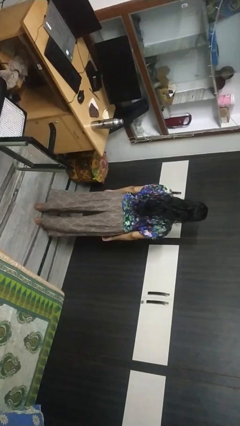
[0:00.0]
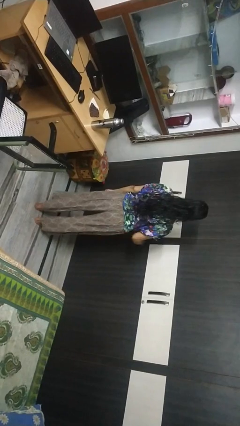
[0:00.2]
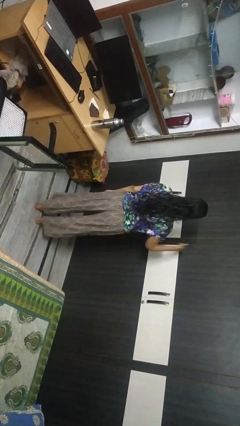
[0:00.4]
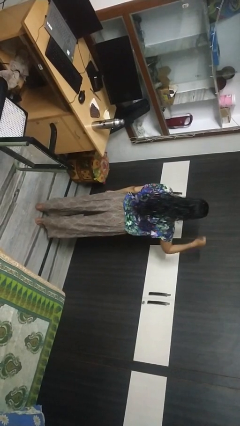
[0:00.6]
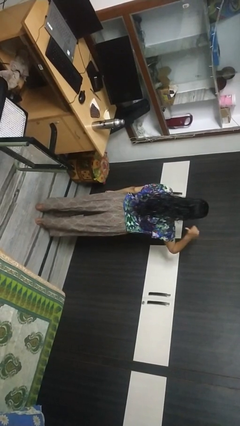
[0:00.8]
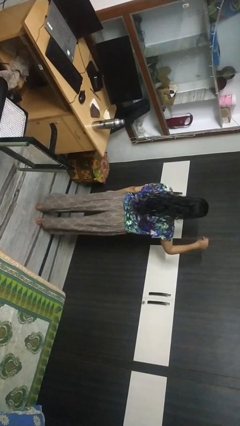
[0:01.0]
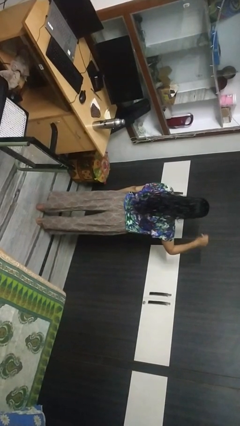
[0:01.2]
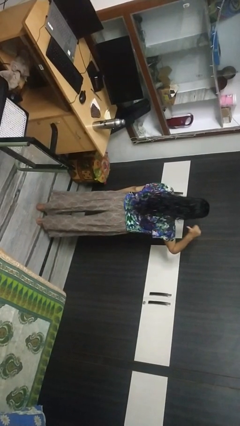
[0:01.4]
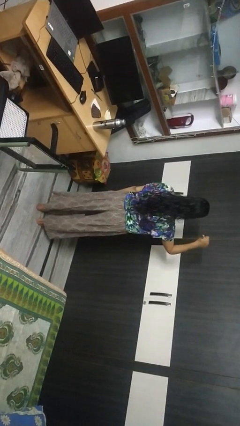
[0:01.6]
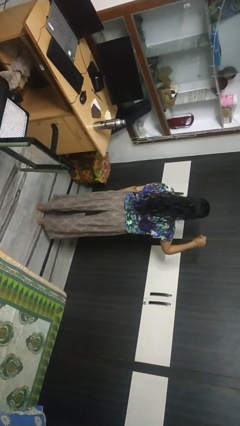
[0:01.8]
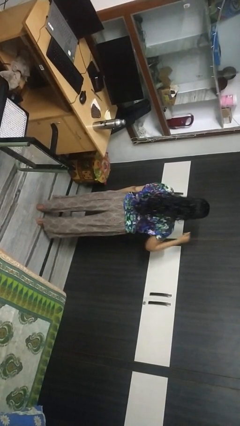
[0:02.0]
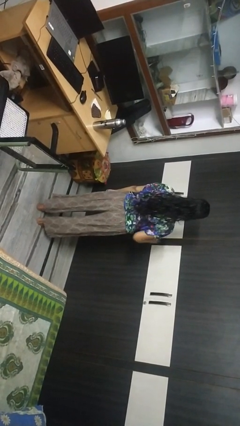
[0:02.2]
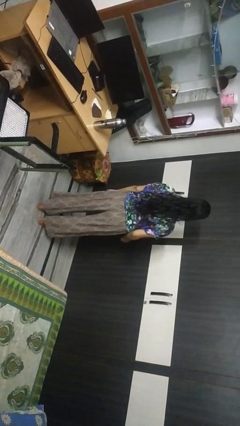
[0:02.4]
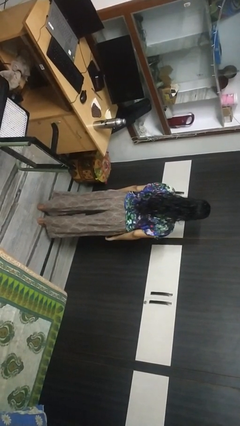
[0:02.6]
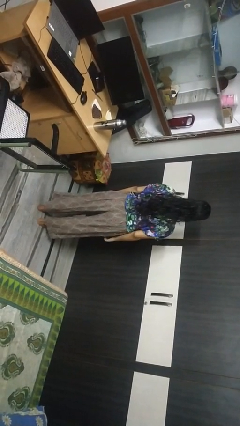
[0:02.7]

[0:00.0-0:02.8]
person gestures behind me

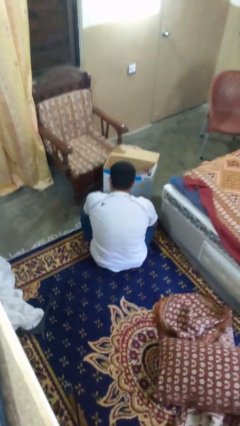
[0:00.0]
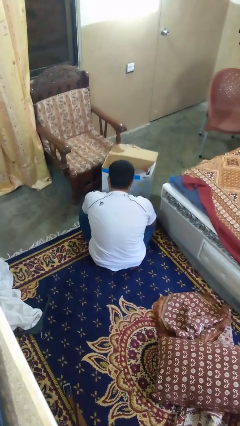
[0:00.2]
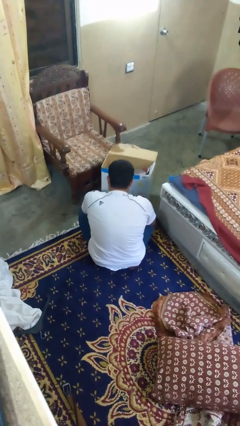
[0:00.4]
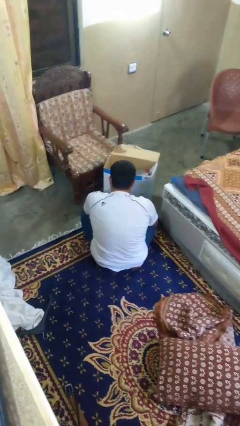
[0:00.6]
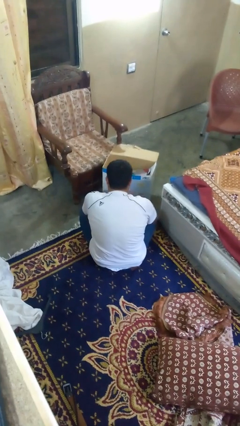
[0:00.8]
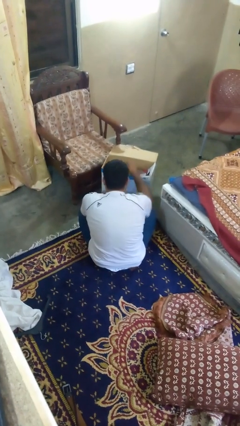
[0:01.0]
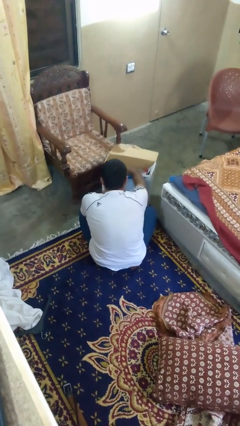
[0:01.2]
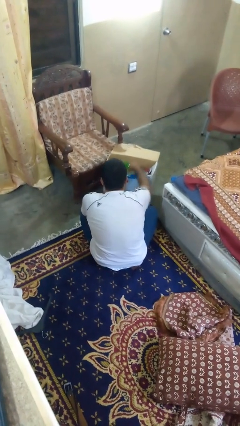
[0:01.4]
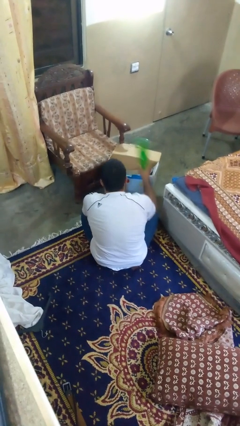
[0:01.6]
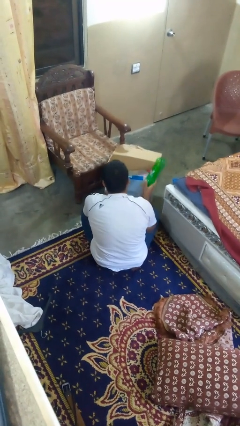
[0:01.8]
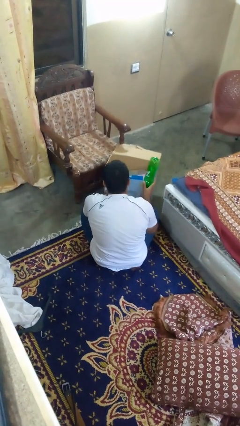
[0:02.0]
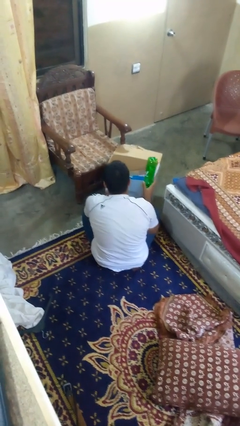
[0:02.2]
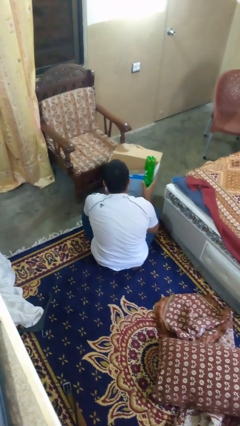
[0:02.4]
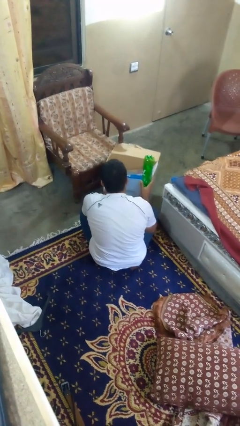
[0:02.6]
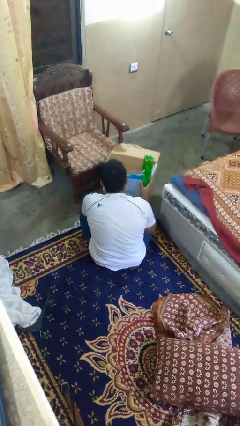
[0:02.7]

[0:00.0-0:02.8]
person takes object from box

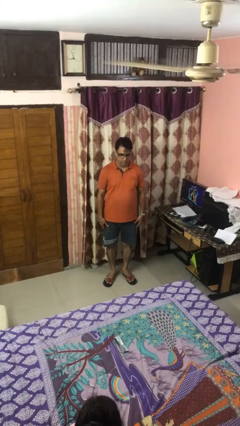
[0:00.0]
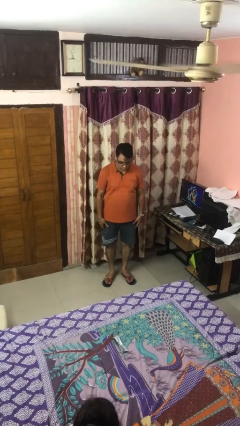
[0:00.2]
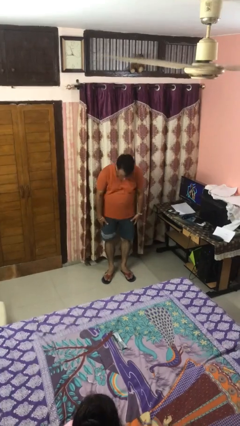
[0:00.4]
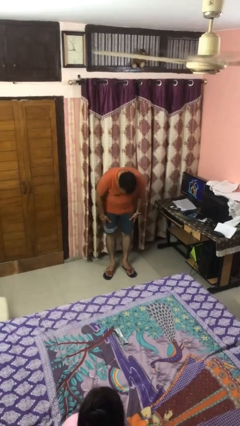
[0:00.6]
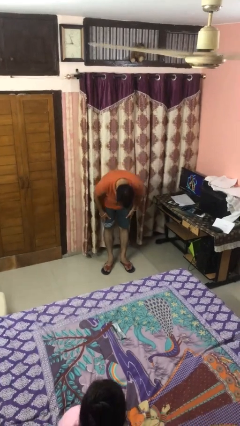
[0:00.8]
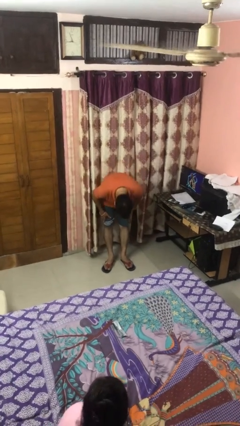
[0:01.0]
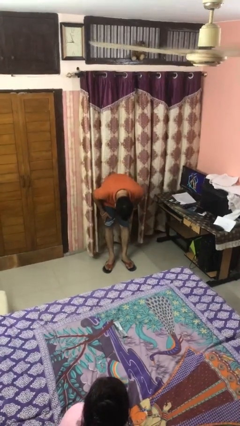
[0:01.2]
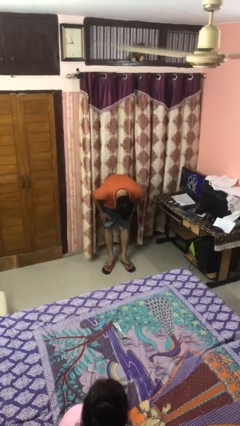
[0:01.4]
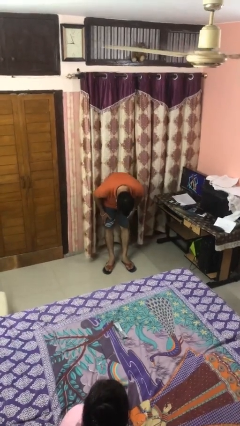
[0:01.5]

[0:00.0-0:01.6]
person bows

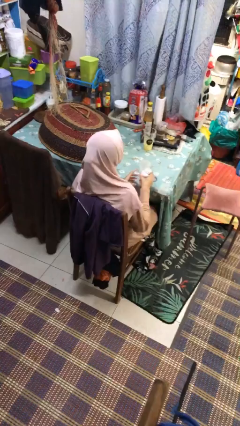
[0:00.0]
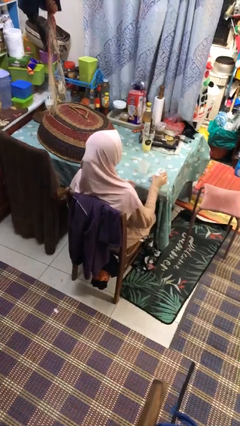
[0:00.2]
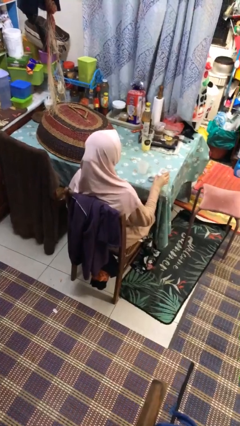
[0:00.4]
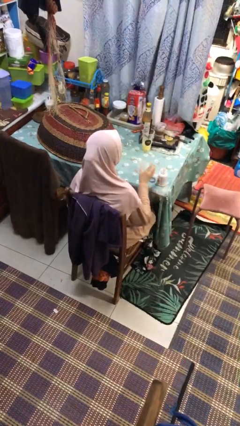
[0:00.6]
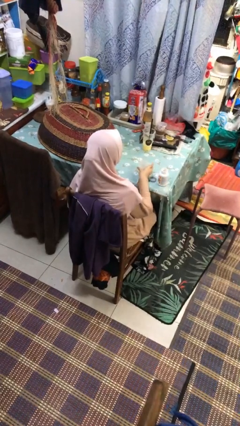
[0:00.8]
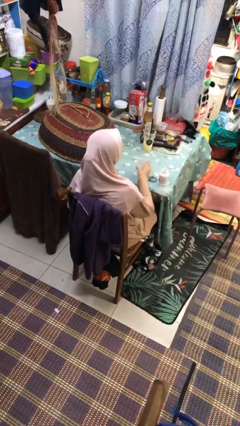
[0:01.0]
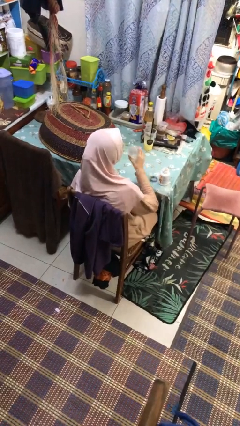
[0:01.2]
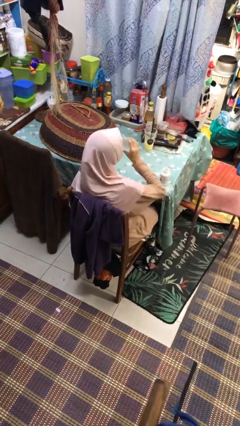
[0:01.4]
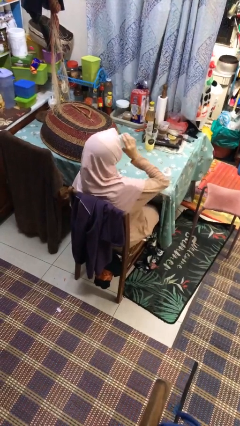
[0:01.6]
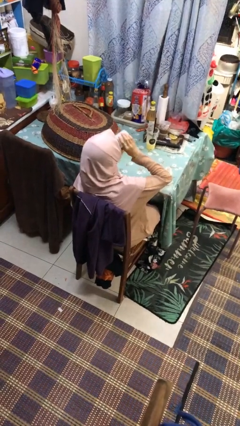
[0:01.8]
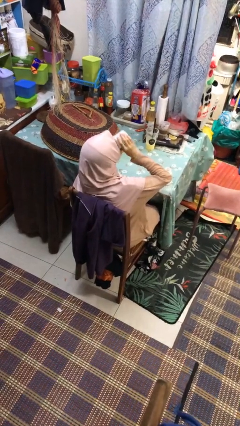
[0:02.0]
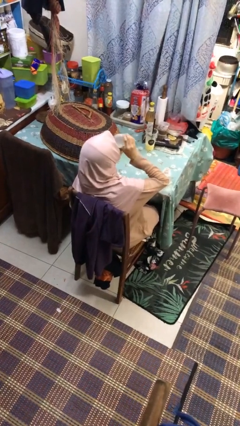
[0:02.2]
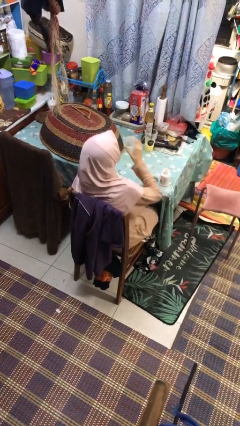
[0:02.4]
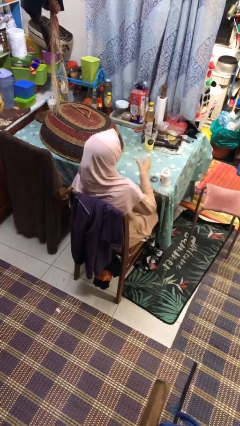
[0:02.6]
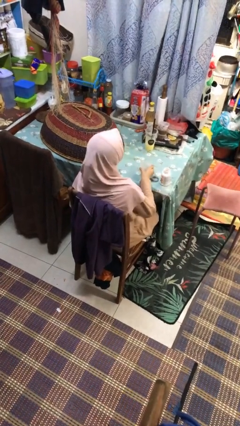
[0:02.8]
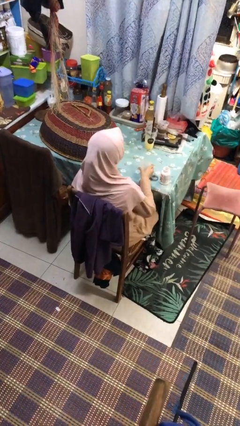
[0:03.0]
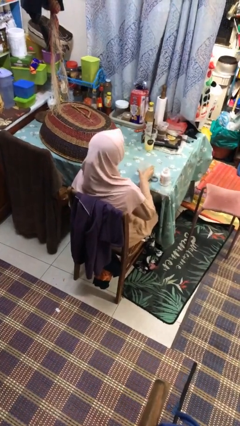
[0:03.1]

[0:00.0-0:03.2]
person drinks from cup

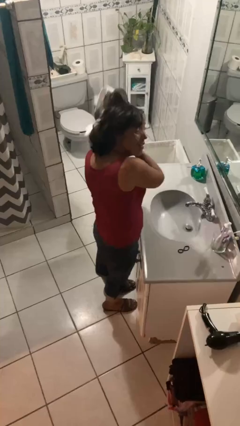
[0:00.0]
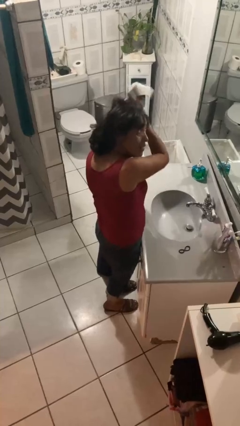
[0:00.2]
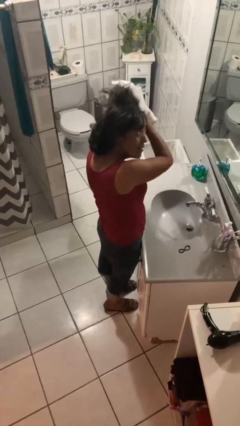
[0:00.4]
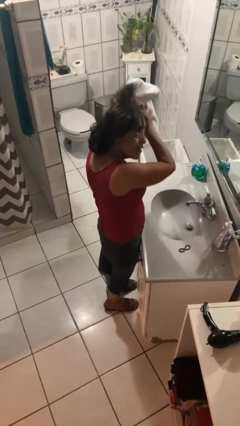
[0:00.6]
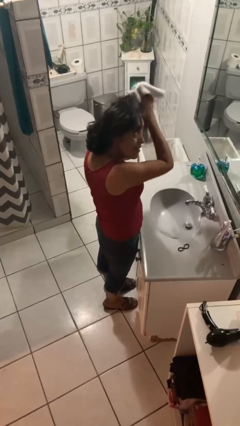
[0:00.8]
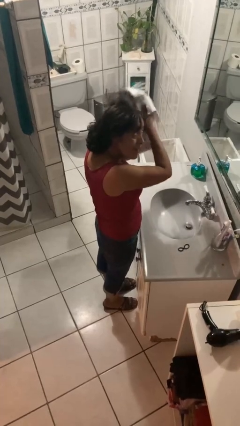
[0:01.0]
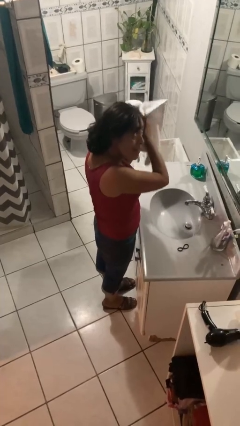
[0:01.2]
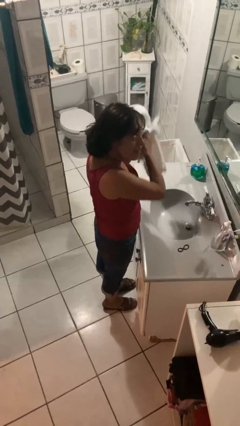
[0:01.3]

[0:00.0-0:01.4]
person dries hair with towel

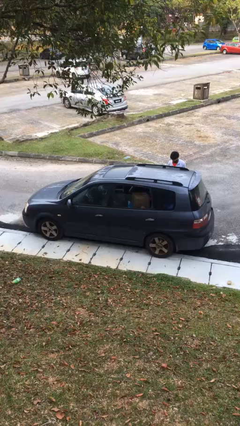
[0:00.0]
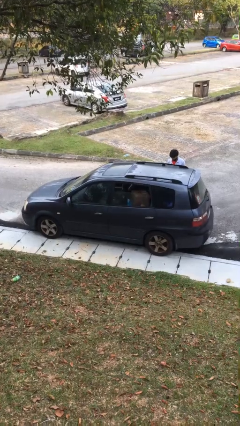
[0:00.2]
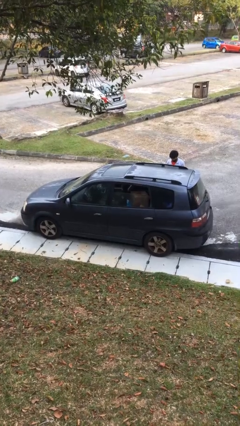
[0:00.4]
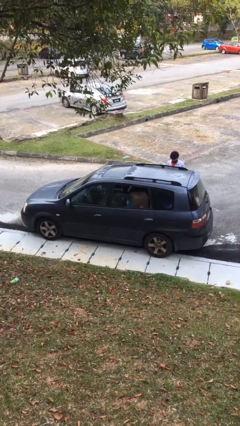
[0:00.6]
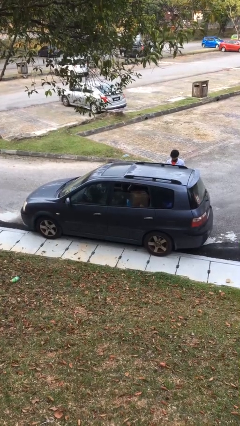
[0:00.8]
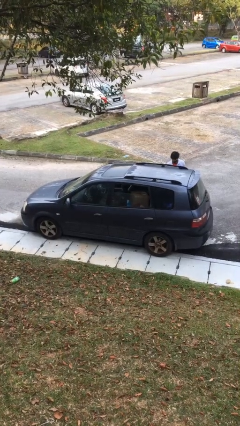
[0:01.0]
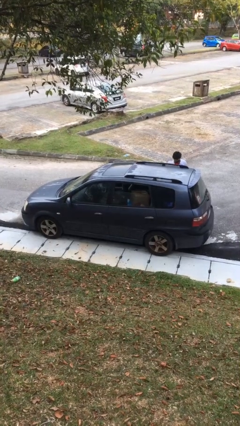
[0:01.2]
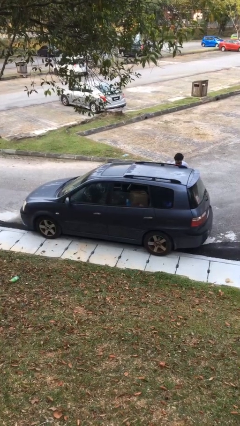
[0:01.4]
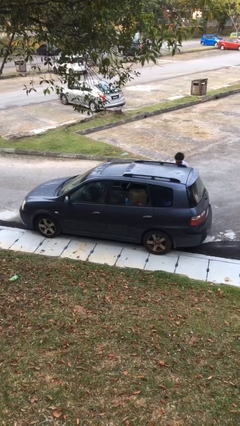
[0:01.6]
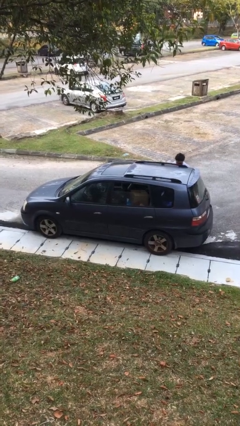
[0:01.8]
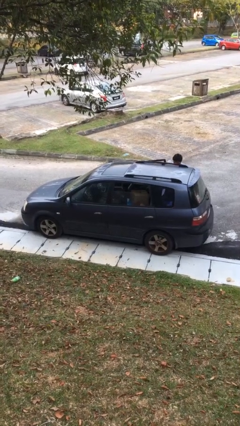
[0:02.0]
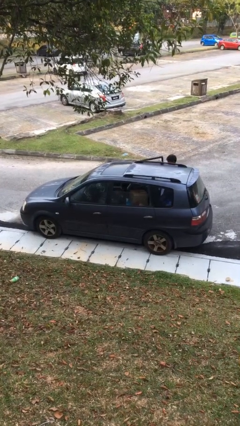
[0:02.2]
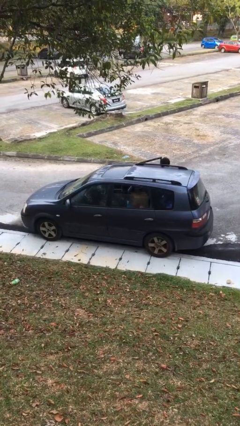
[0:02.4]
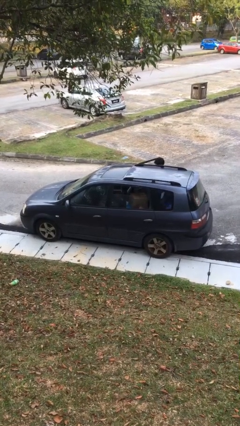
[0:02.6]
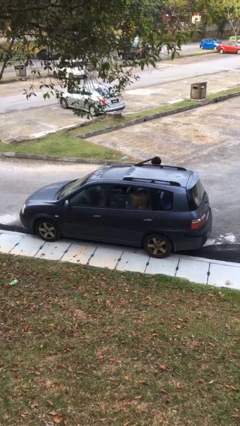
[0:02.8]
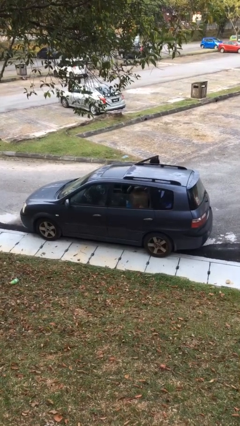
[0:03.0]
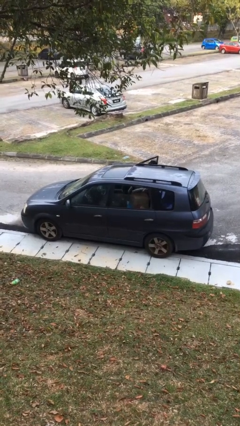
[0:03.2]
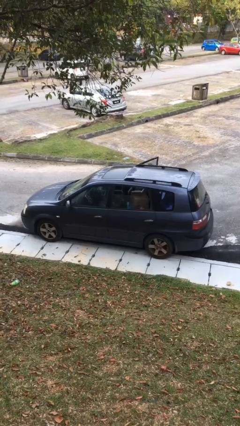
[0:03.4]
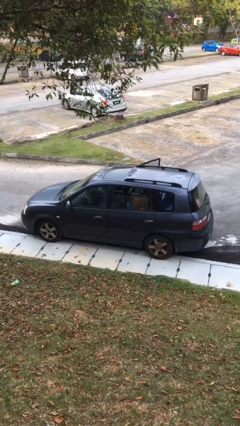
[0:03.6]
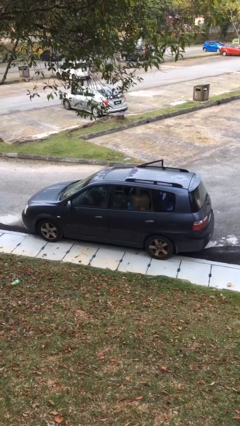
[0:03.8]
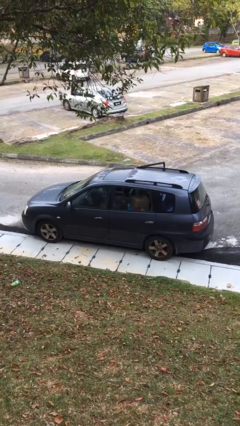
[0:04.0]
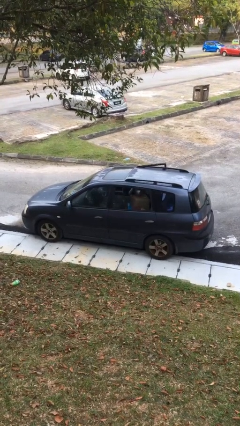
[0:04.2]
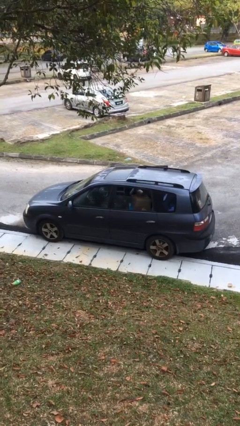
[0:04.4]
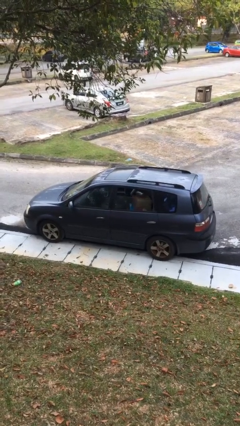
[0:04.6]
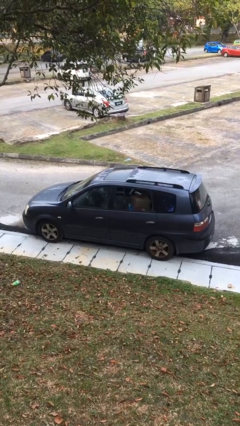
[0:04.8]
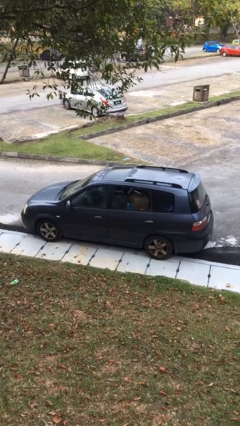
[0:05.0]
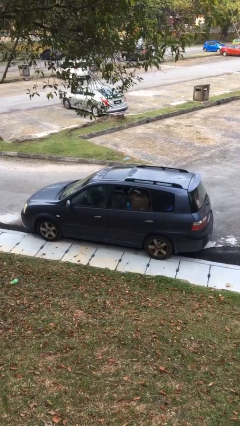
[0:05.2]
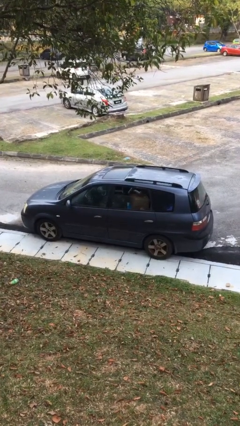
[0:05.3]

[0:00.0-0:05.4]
car picks up person
